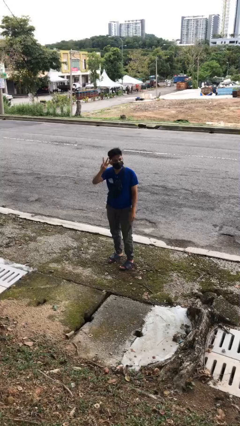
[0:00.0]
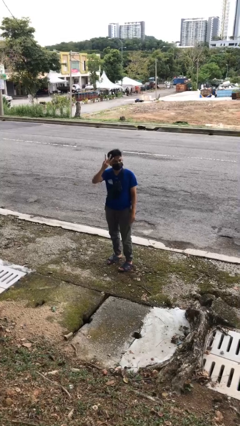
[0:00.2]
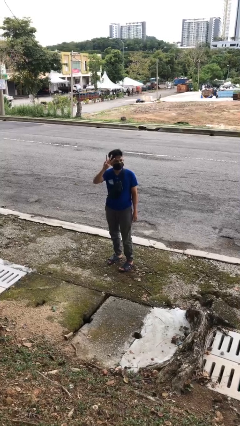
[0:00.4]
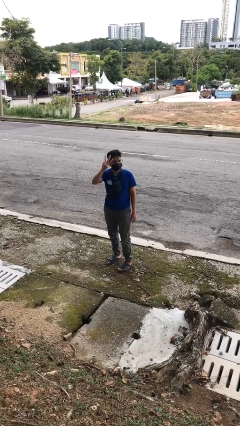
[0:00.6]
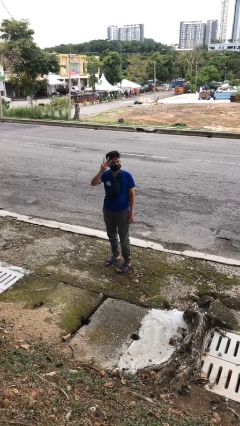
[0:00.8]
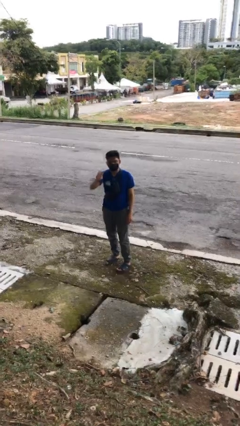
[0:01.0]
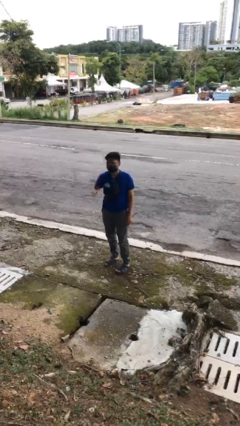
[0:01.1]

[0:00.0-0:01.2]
person gestures number three

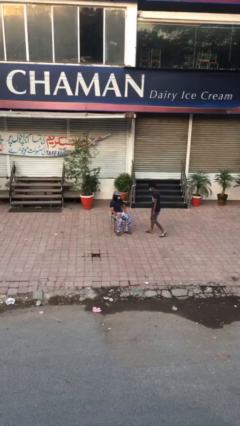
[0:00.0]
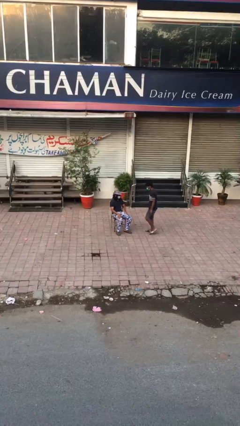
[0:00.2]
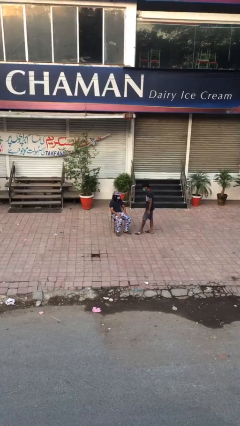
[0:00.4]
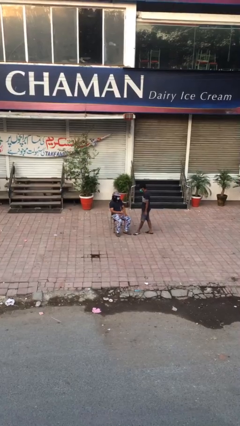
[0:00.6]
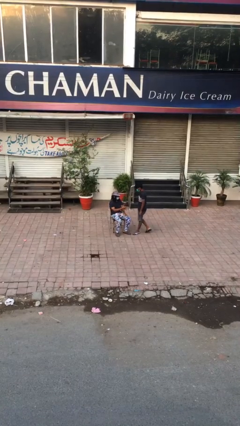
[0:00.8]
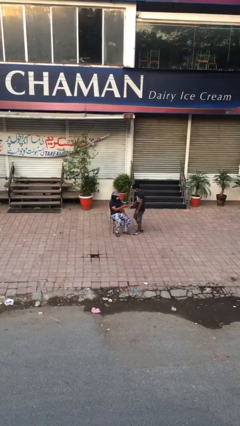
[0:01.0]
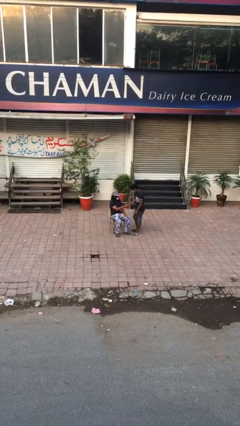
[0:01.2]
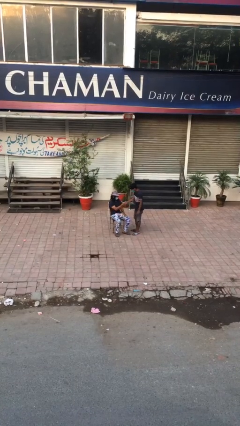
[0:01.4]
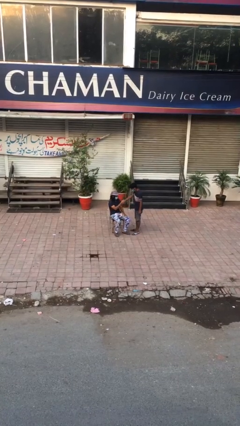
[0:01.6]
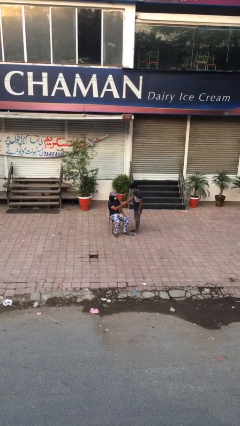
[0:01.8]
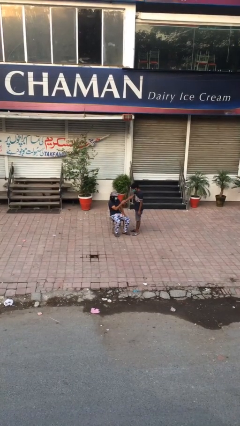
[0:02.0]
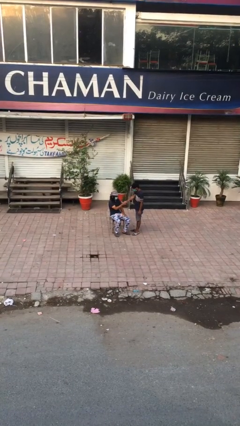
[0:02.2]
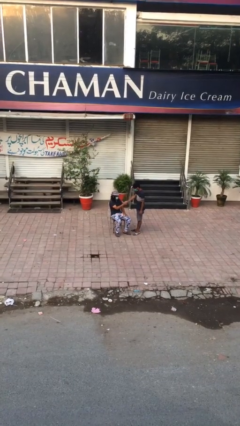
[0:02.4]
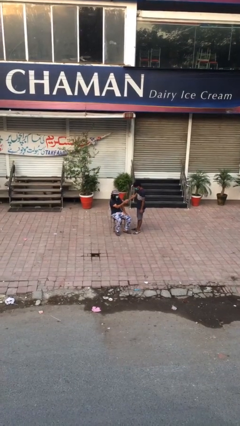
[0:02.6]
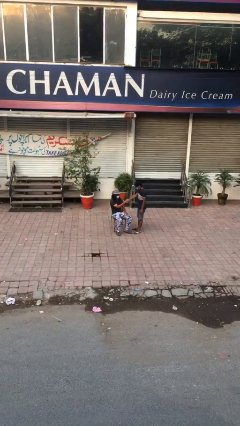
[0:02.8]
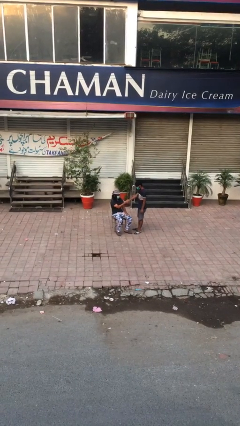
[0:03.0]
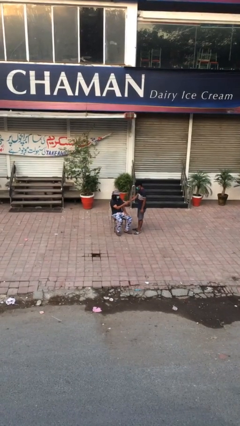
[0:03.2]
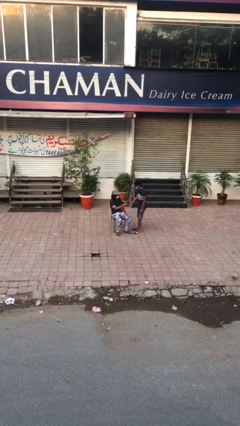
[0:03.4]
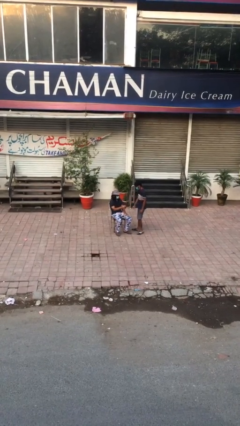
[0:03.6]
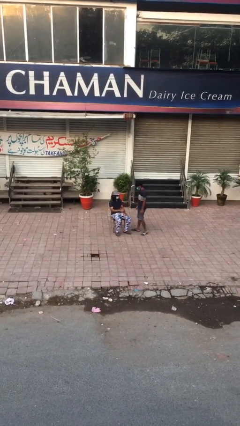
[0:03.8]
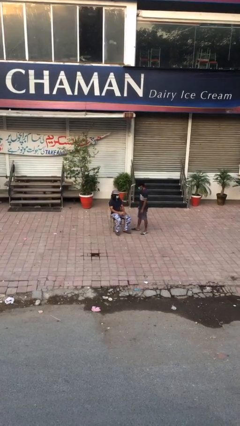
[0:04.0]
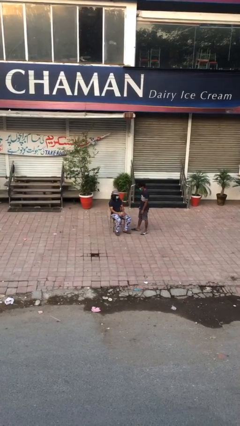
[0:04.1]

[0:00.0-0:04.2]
person shakes hand

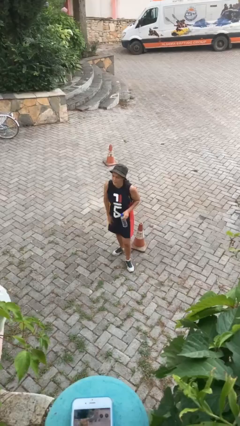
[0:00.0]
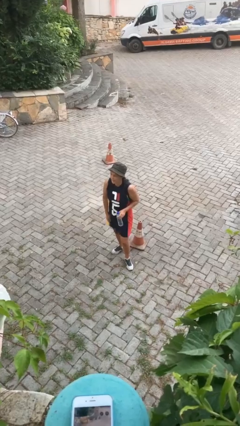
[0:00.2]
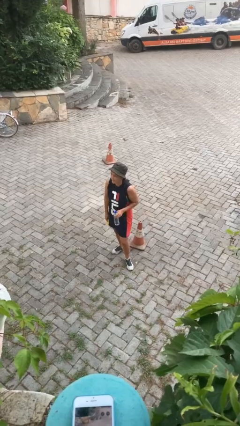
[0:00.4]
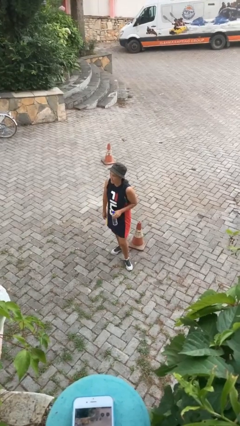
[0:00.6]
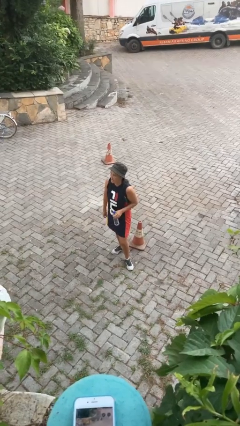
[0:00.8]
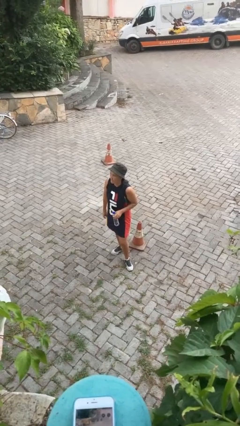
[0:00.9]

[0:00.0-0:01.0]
person gestures lower hand

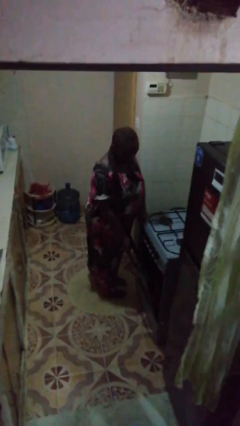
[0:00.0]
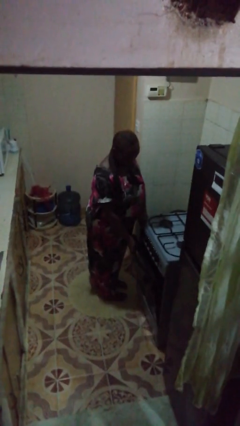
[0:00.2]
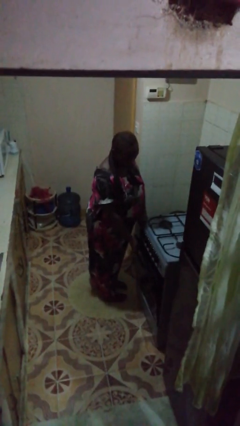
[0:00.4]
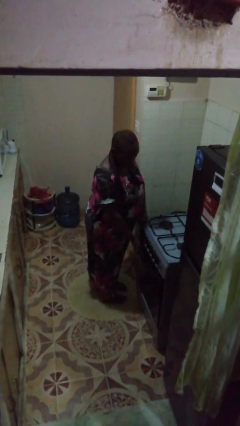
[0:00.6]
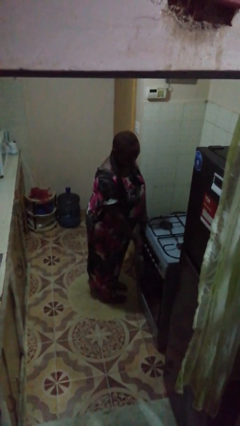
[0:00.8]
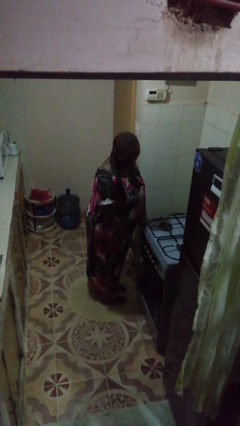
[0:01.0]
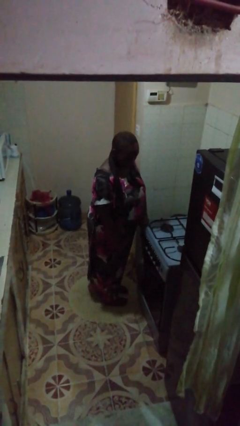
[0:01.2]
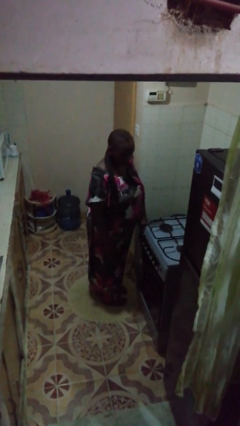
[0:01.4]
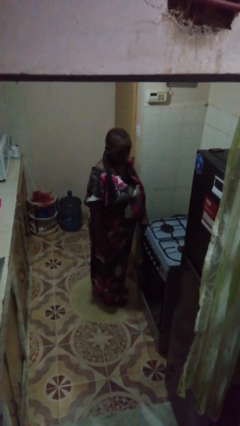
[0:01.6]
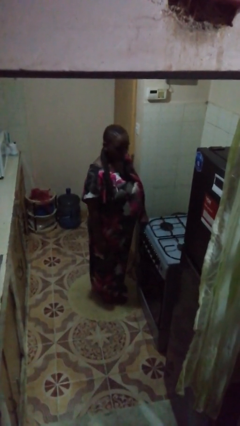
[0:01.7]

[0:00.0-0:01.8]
person closes oven door

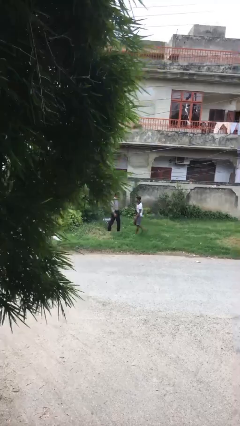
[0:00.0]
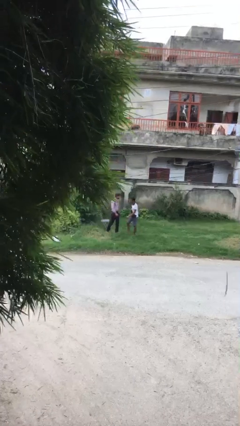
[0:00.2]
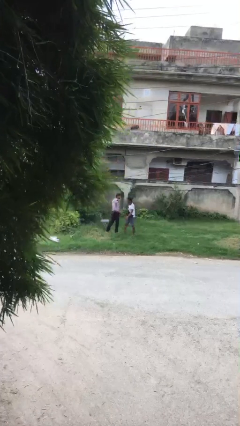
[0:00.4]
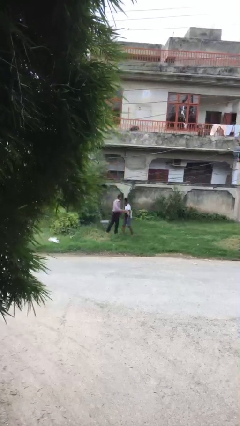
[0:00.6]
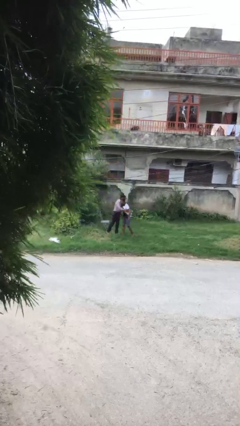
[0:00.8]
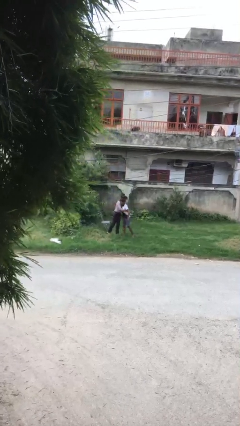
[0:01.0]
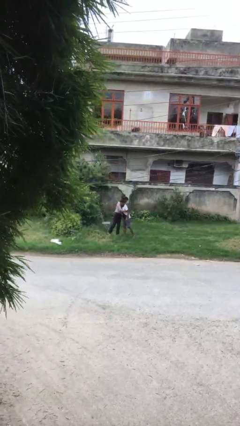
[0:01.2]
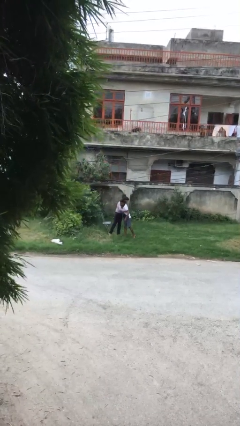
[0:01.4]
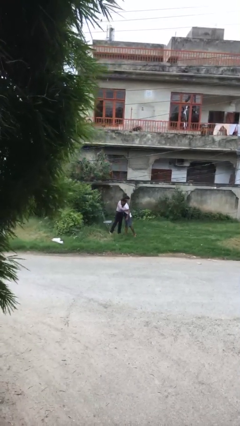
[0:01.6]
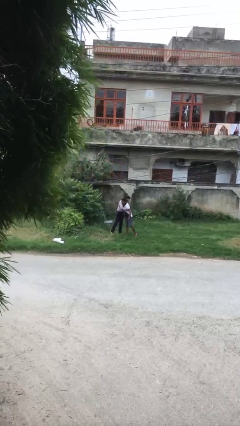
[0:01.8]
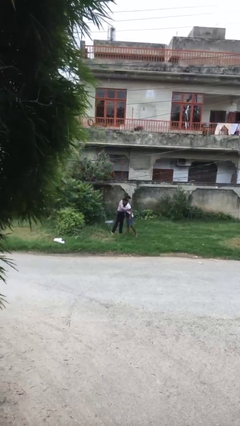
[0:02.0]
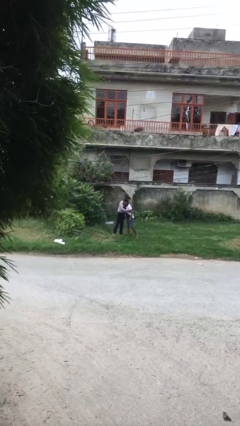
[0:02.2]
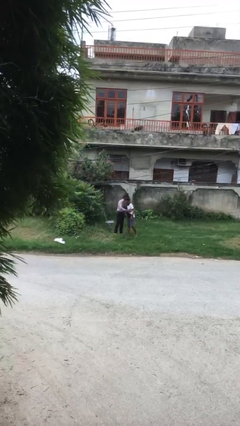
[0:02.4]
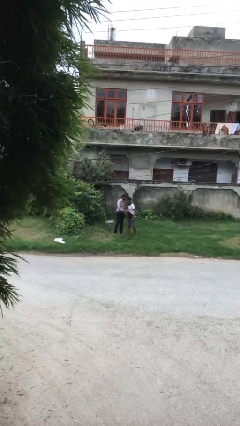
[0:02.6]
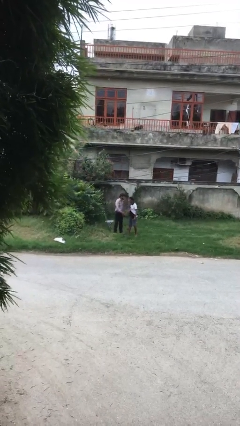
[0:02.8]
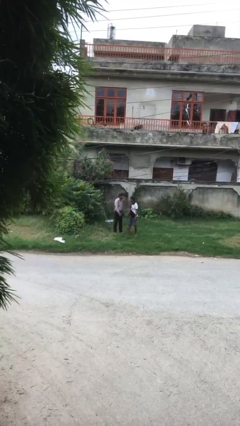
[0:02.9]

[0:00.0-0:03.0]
person embraces person

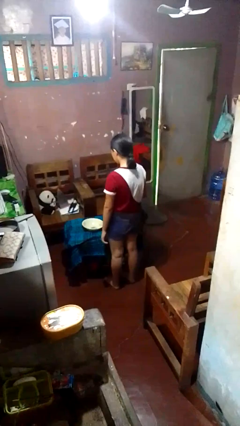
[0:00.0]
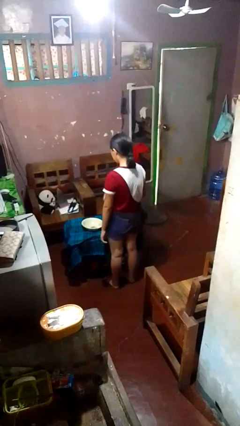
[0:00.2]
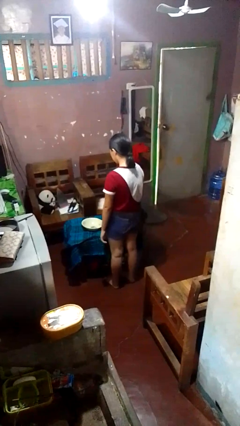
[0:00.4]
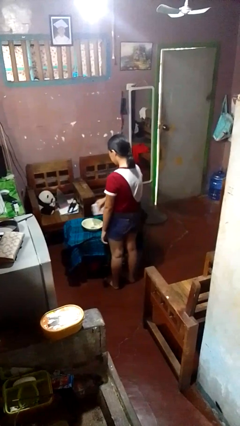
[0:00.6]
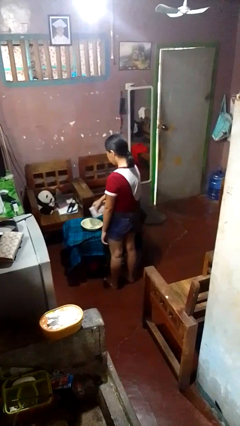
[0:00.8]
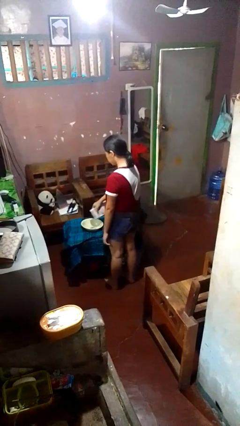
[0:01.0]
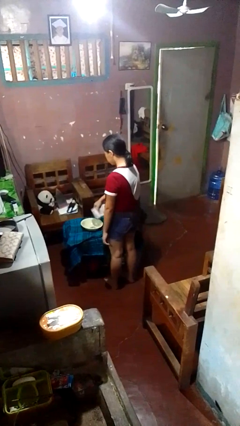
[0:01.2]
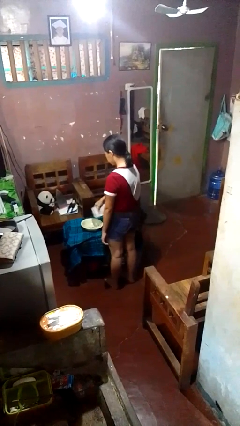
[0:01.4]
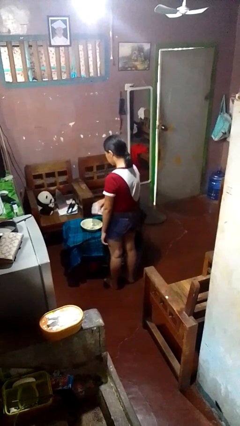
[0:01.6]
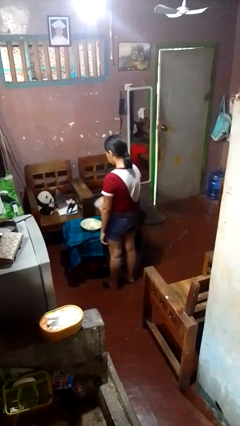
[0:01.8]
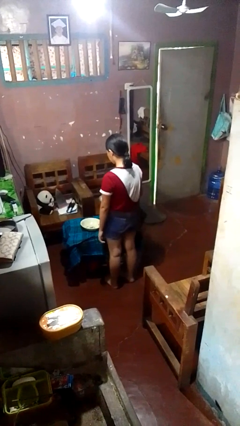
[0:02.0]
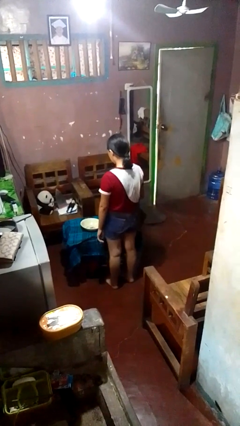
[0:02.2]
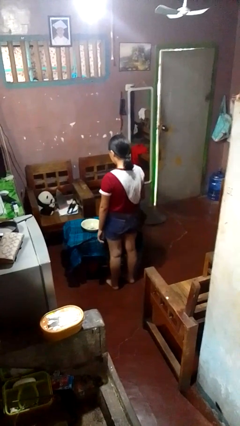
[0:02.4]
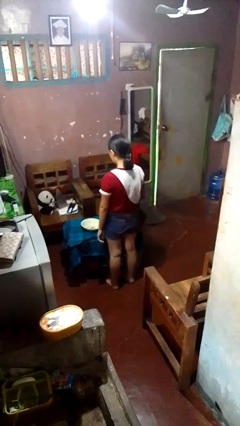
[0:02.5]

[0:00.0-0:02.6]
person pours into bowl

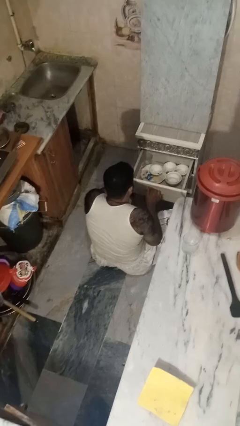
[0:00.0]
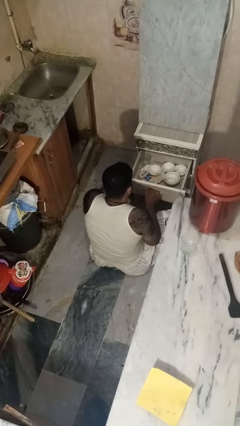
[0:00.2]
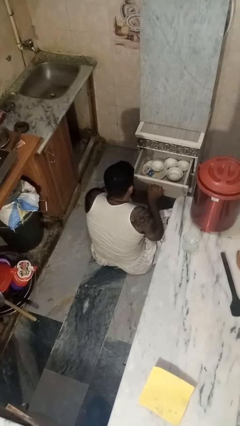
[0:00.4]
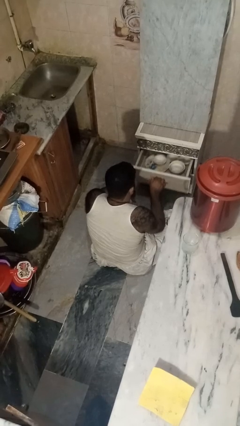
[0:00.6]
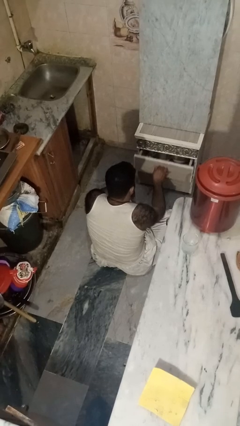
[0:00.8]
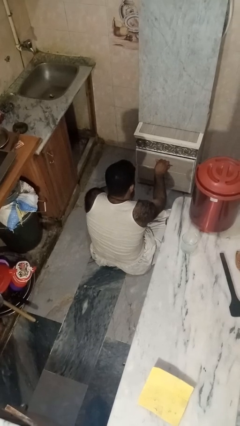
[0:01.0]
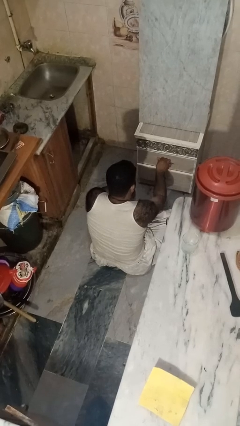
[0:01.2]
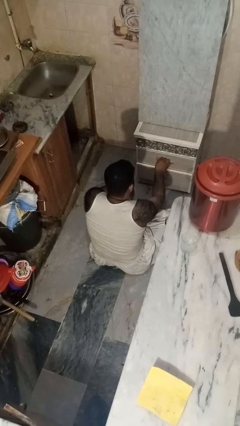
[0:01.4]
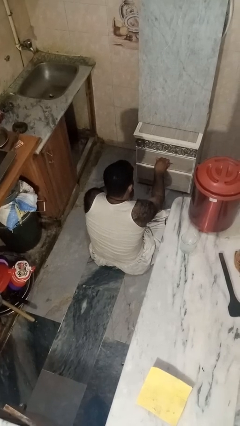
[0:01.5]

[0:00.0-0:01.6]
person closes kitchen drawer

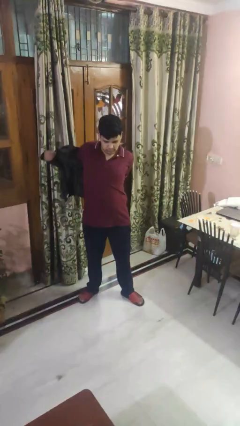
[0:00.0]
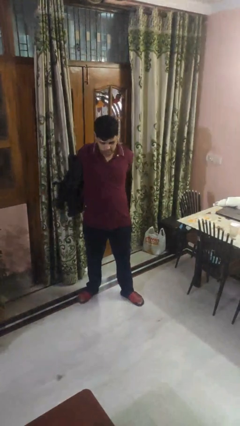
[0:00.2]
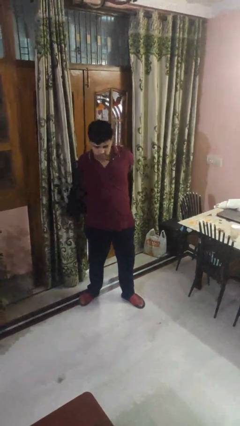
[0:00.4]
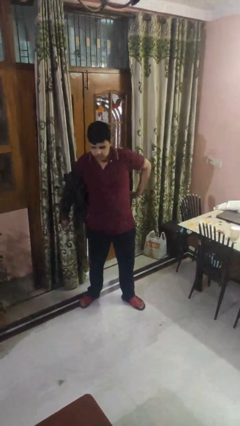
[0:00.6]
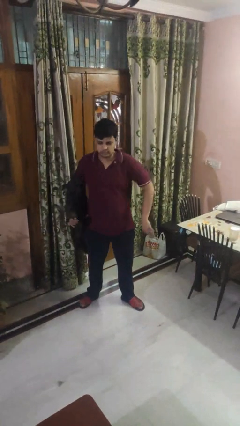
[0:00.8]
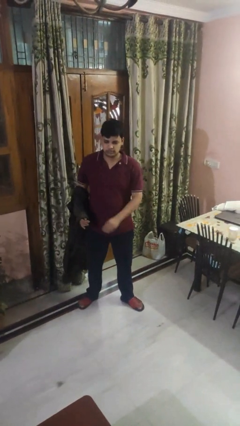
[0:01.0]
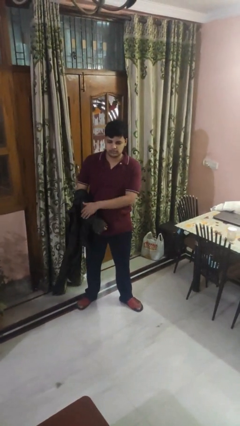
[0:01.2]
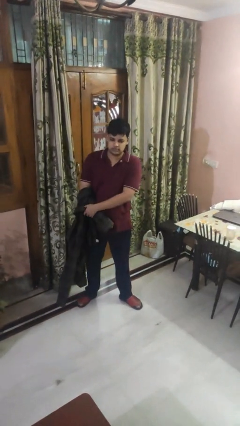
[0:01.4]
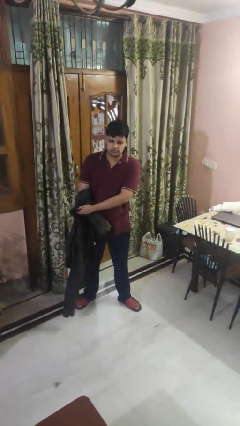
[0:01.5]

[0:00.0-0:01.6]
person takes off shirt
